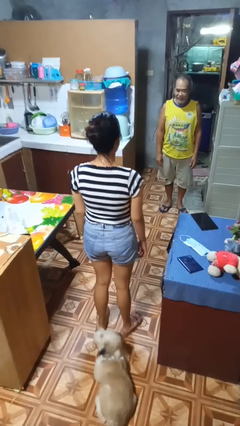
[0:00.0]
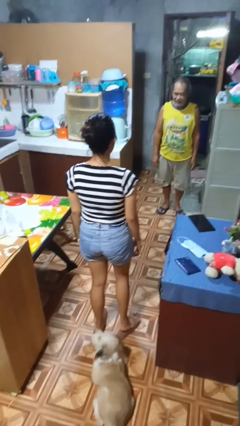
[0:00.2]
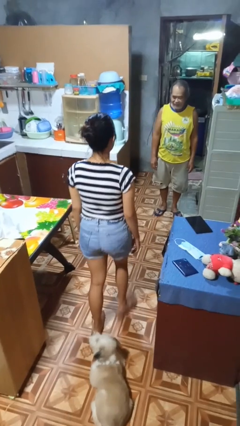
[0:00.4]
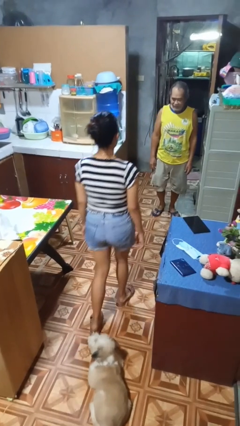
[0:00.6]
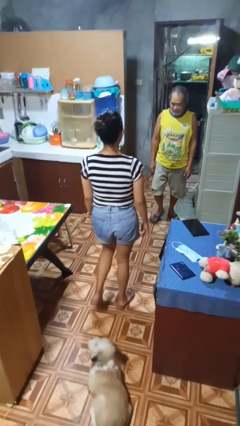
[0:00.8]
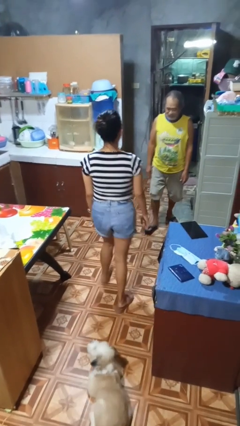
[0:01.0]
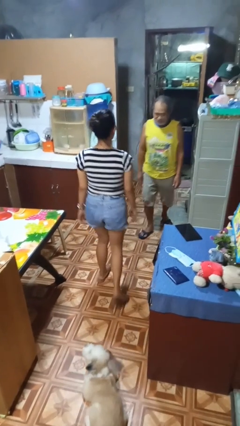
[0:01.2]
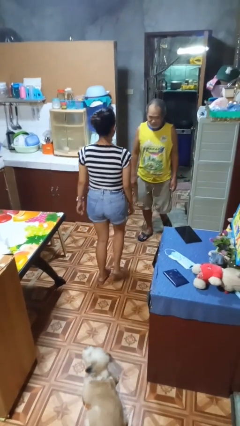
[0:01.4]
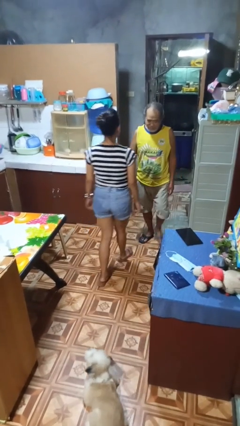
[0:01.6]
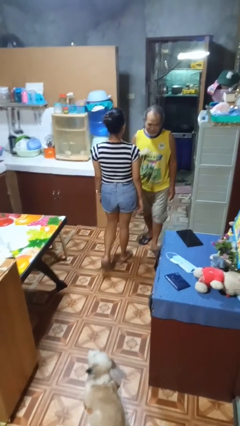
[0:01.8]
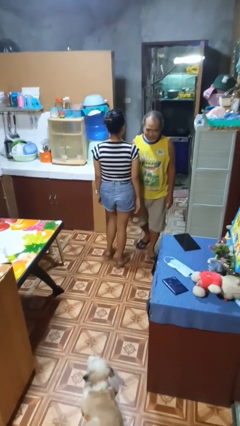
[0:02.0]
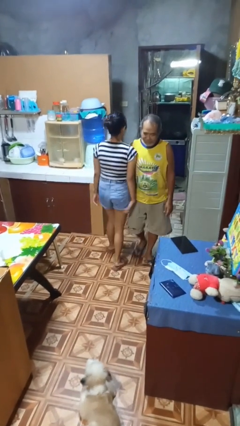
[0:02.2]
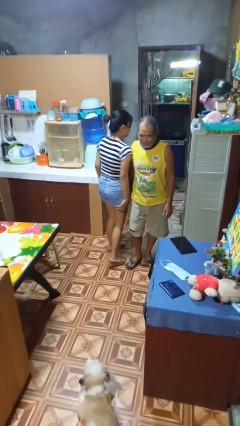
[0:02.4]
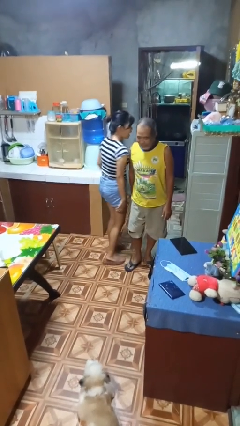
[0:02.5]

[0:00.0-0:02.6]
person bumps into person

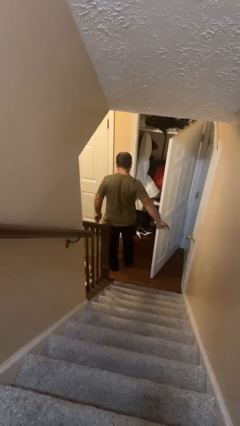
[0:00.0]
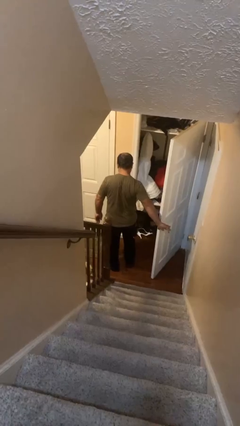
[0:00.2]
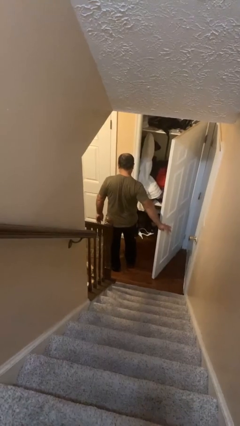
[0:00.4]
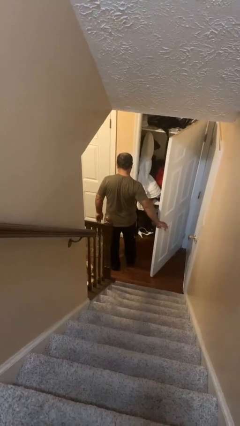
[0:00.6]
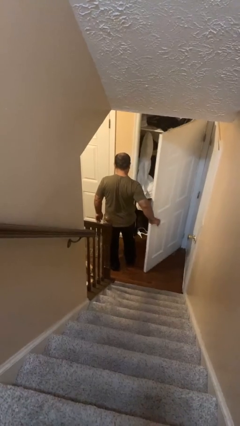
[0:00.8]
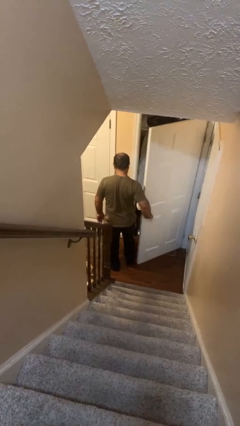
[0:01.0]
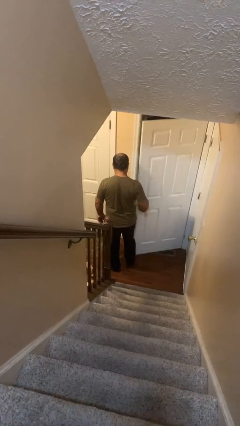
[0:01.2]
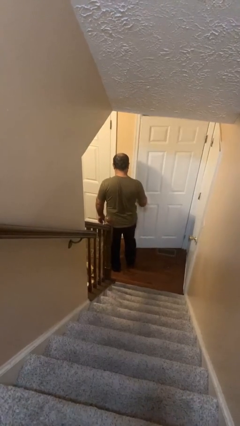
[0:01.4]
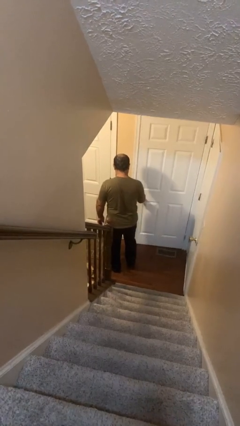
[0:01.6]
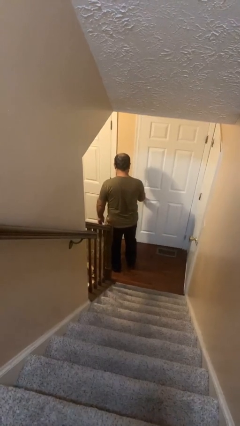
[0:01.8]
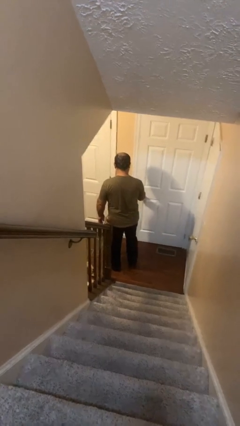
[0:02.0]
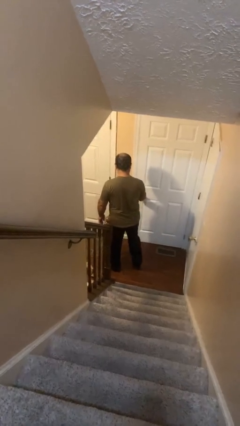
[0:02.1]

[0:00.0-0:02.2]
person closes facility door

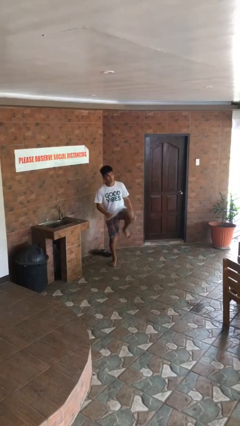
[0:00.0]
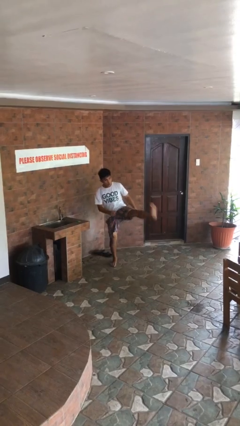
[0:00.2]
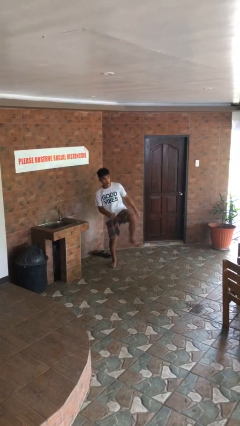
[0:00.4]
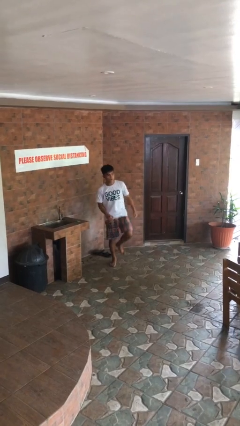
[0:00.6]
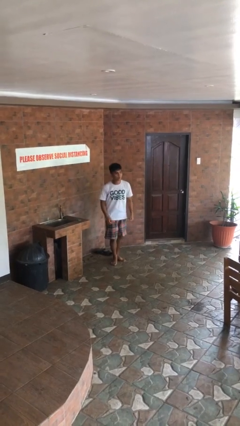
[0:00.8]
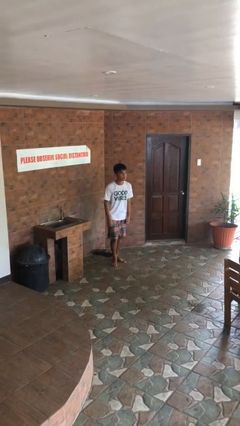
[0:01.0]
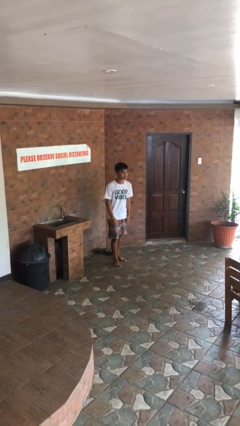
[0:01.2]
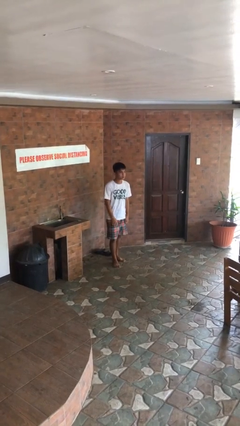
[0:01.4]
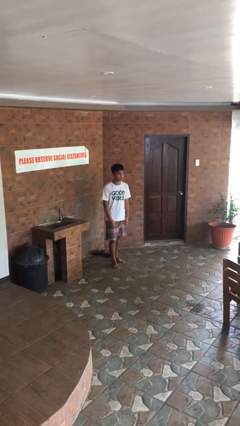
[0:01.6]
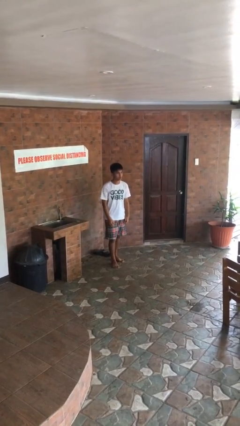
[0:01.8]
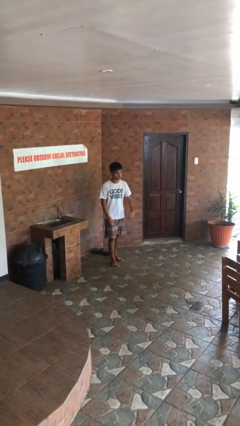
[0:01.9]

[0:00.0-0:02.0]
person karate kicks

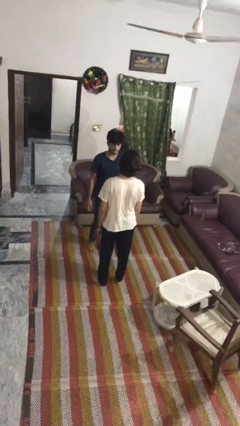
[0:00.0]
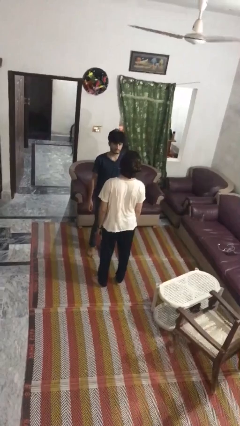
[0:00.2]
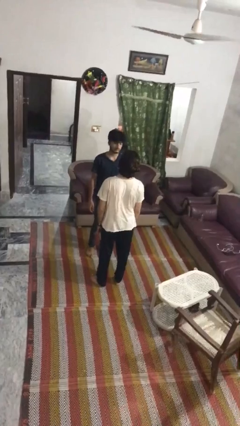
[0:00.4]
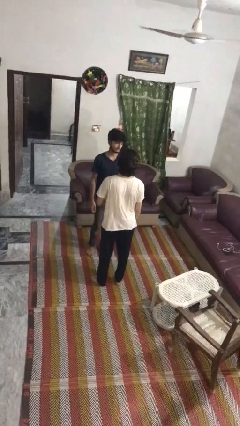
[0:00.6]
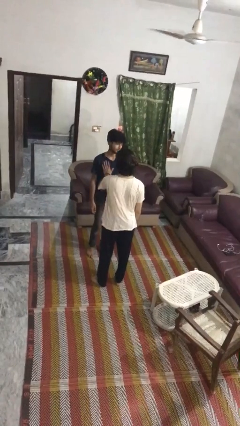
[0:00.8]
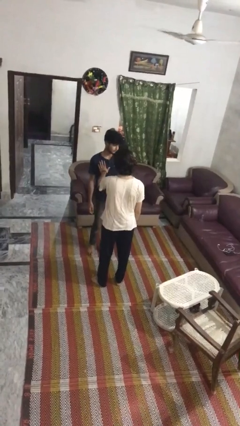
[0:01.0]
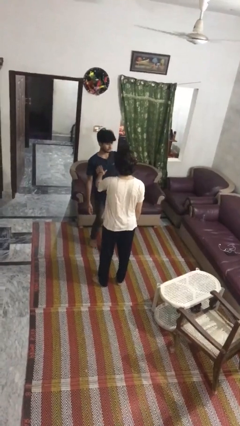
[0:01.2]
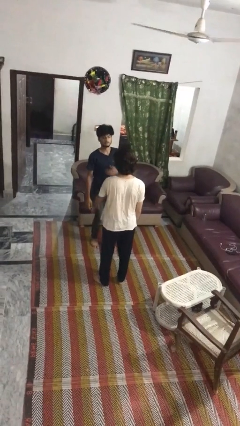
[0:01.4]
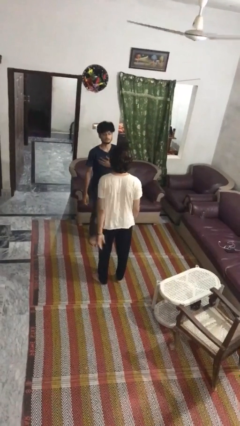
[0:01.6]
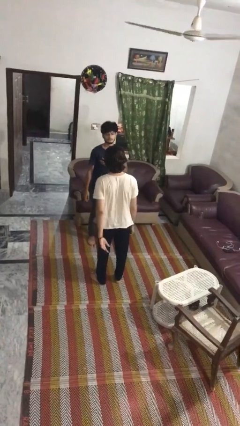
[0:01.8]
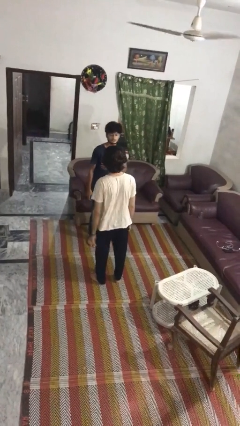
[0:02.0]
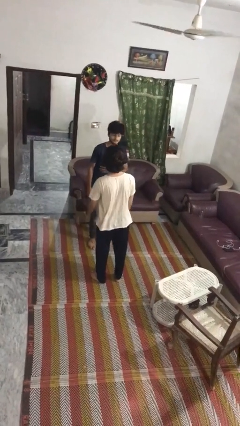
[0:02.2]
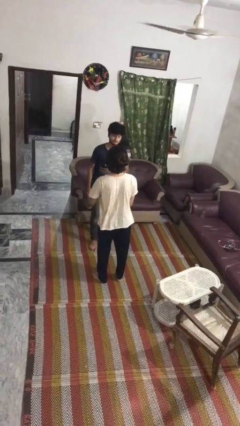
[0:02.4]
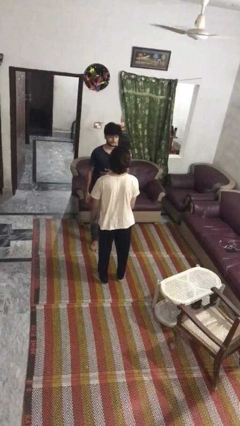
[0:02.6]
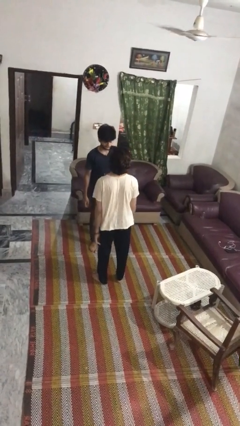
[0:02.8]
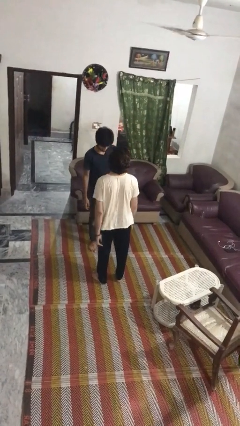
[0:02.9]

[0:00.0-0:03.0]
person shoves person

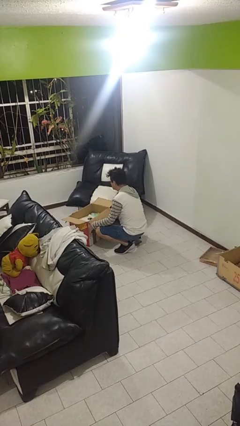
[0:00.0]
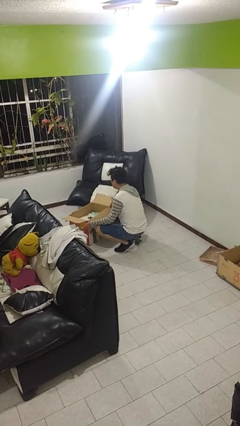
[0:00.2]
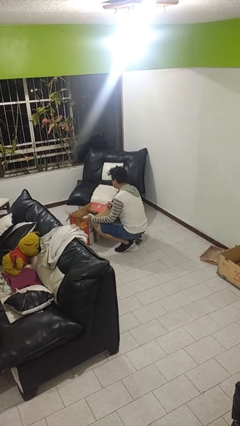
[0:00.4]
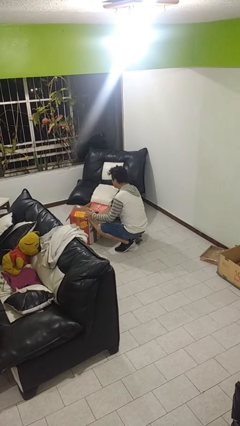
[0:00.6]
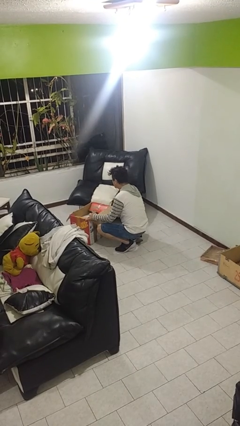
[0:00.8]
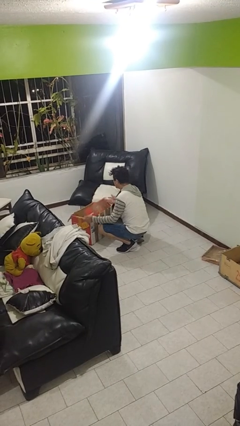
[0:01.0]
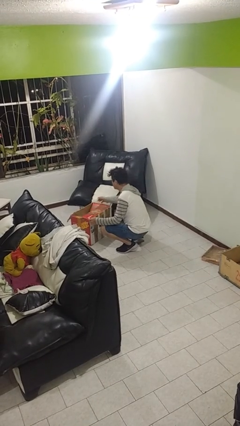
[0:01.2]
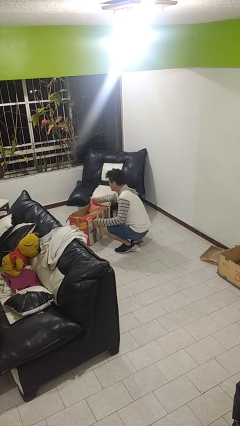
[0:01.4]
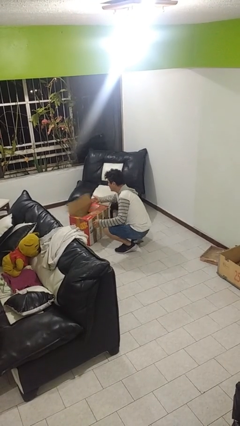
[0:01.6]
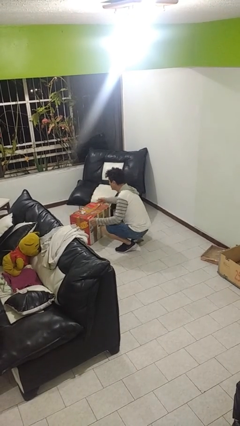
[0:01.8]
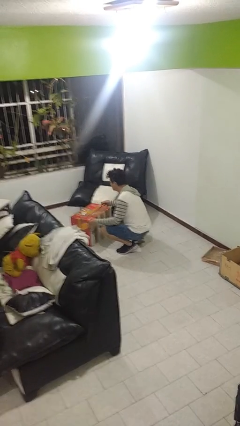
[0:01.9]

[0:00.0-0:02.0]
person closes box

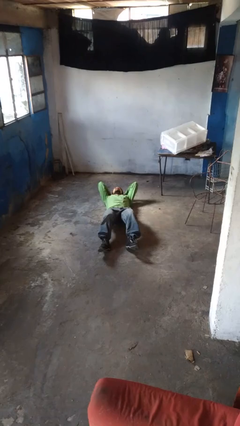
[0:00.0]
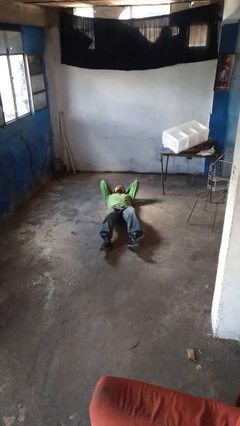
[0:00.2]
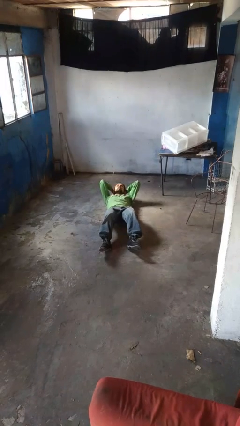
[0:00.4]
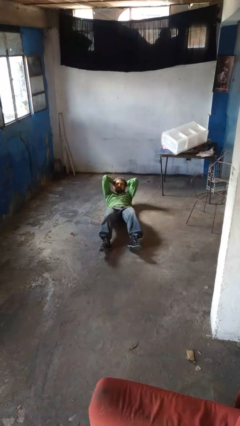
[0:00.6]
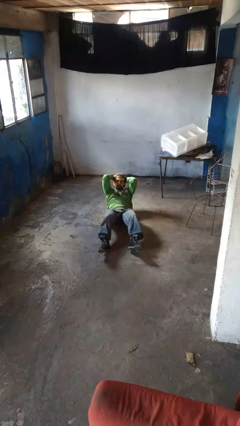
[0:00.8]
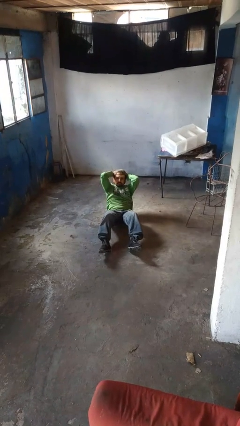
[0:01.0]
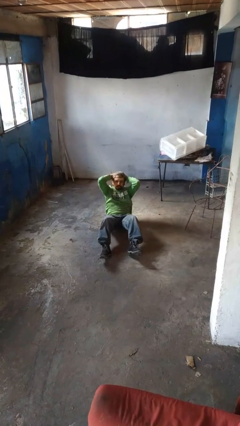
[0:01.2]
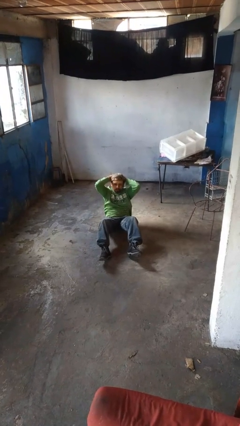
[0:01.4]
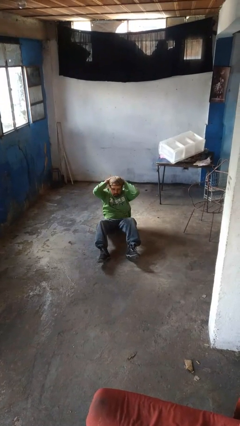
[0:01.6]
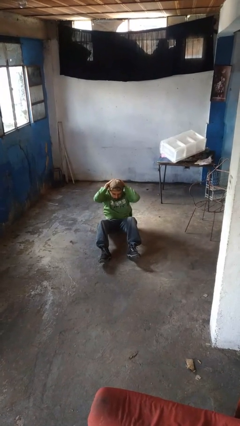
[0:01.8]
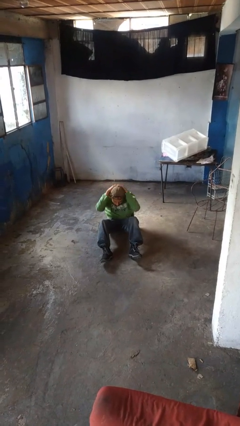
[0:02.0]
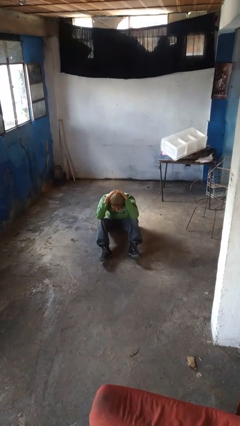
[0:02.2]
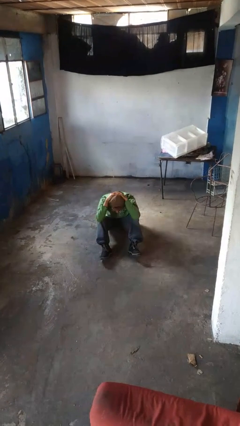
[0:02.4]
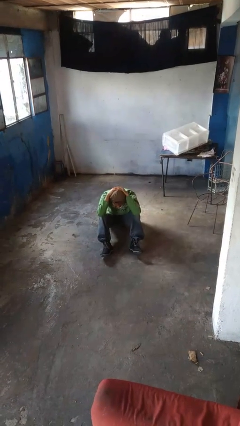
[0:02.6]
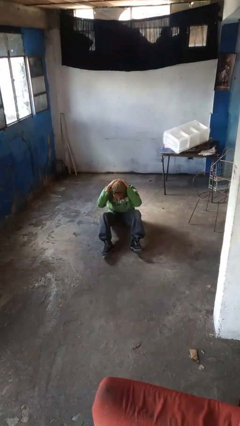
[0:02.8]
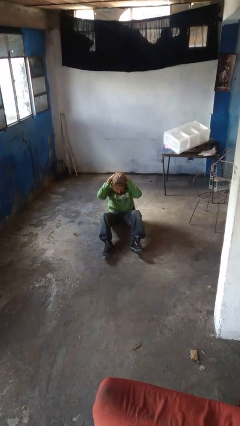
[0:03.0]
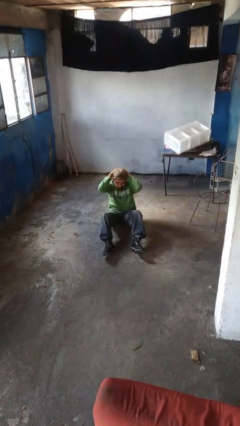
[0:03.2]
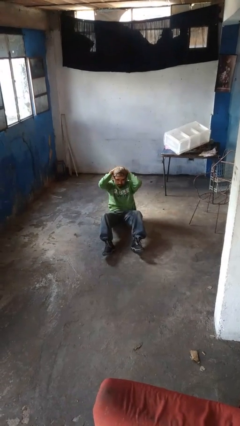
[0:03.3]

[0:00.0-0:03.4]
person exercises with situp

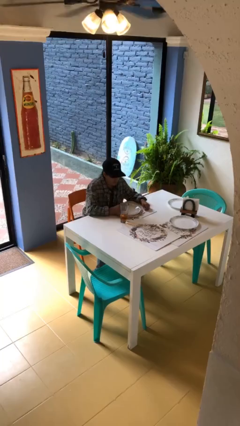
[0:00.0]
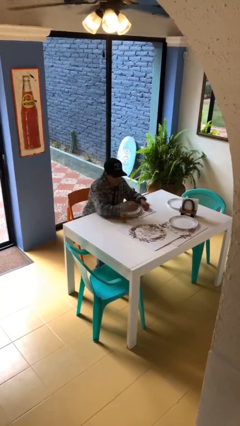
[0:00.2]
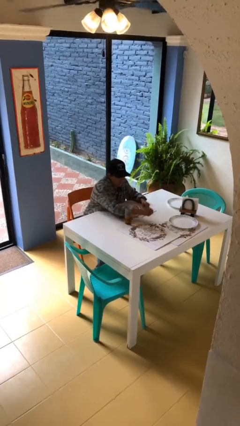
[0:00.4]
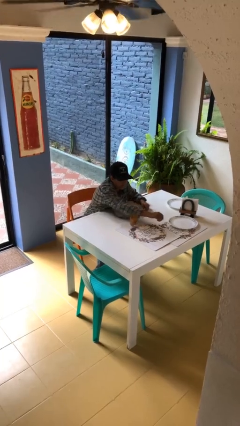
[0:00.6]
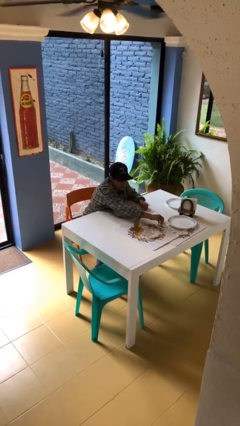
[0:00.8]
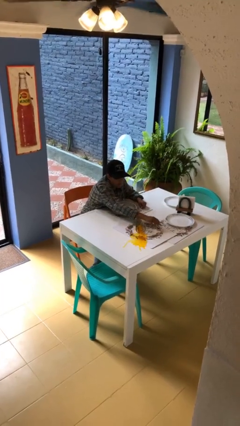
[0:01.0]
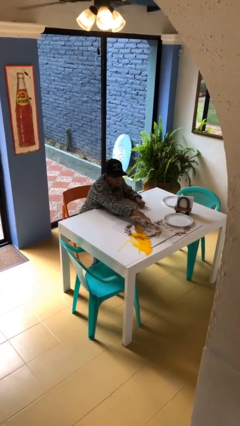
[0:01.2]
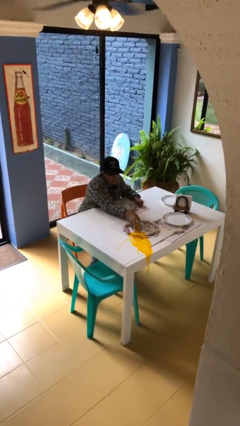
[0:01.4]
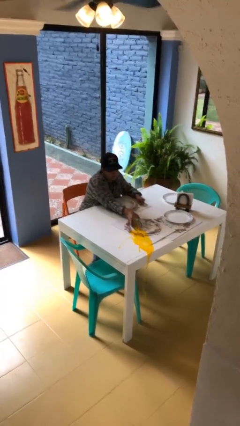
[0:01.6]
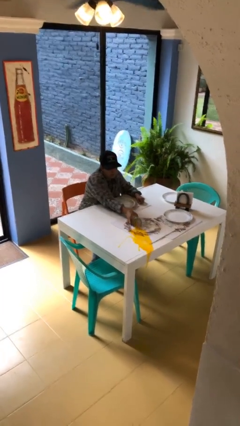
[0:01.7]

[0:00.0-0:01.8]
person spills on table
